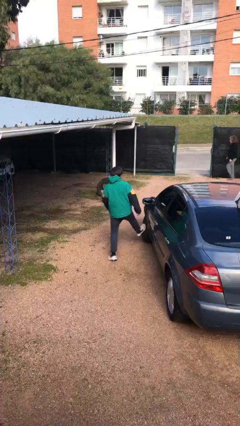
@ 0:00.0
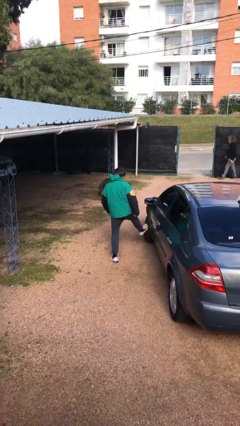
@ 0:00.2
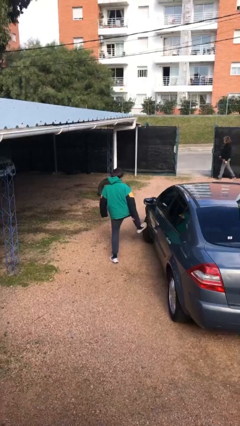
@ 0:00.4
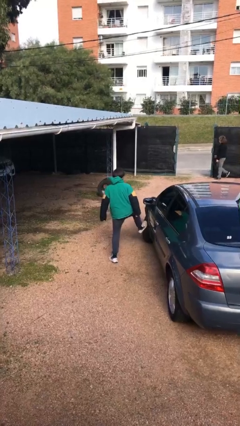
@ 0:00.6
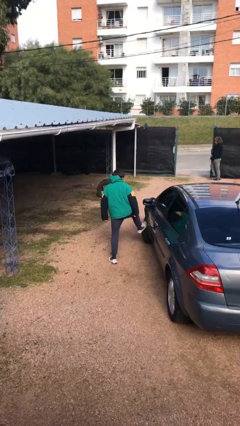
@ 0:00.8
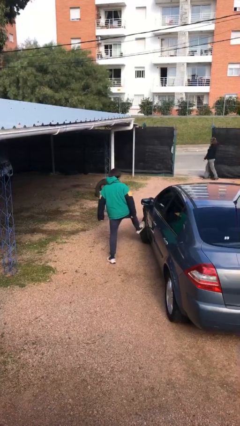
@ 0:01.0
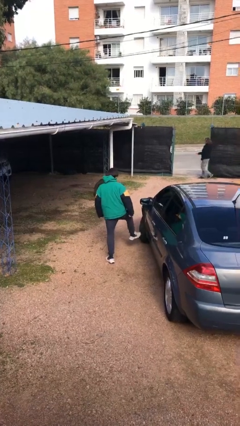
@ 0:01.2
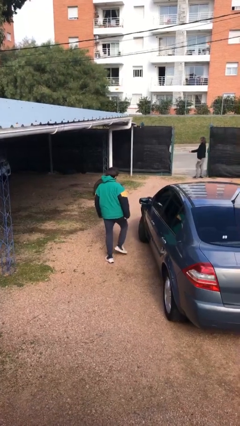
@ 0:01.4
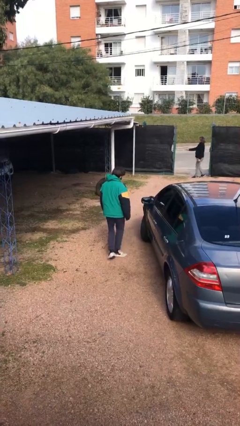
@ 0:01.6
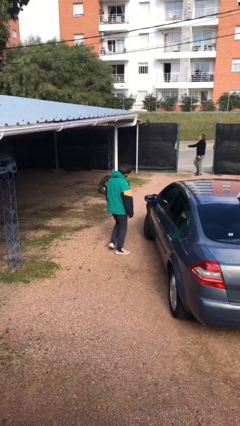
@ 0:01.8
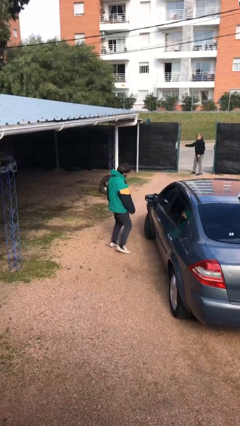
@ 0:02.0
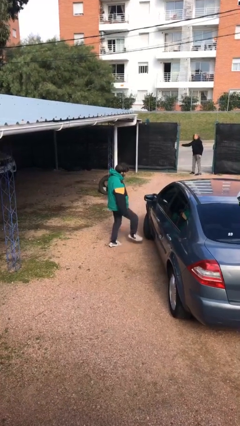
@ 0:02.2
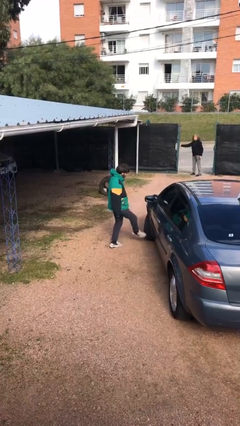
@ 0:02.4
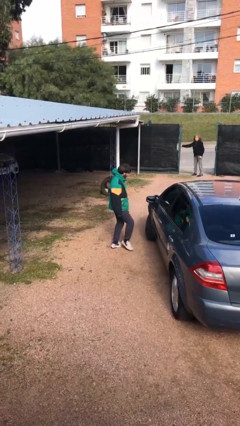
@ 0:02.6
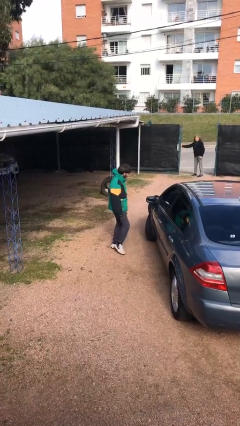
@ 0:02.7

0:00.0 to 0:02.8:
person kicks car tires

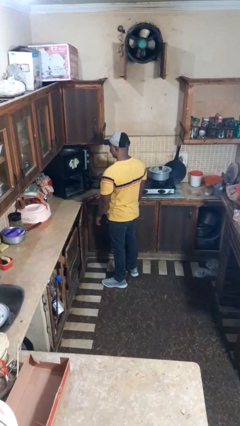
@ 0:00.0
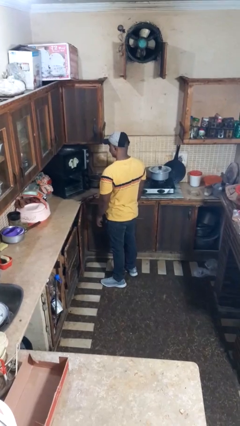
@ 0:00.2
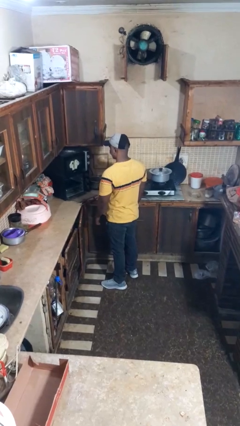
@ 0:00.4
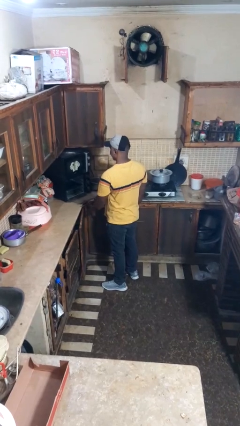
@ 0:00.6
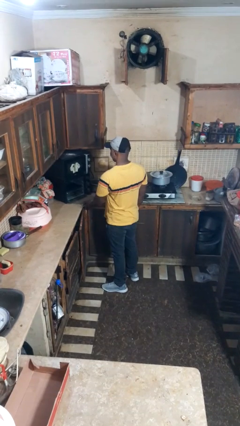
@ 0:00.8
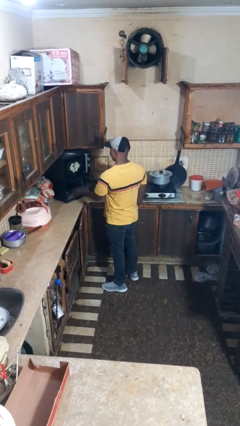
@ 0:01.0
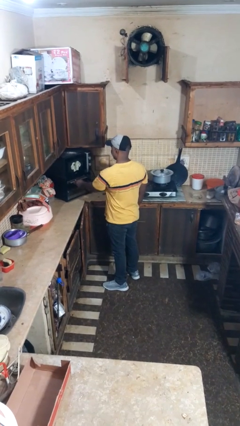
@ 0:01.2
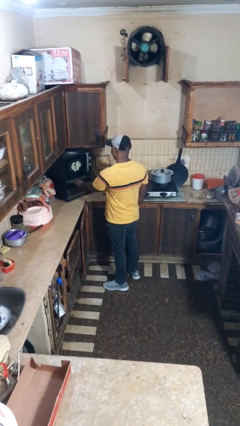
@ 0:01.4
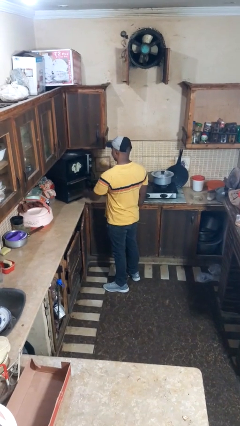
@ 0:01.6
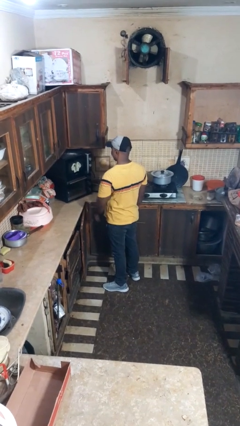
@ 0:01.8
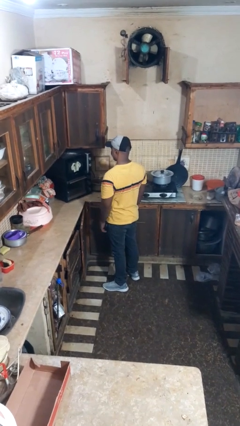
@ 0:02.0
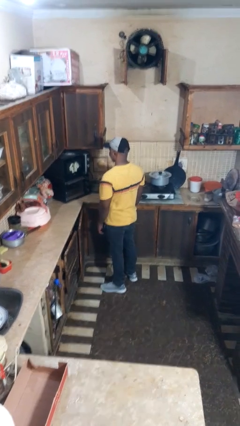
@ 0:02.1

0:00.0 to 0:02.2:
person closes oven door

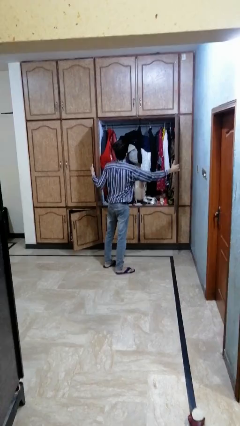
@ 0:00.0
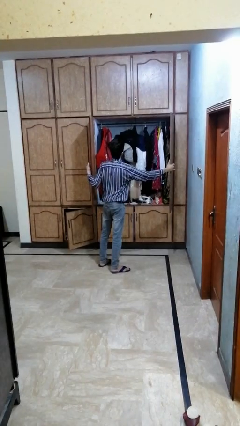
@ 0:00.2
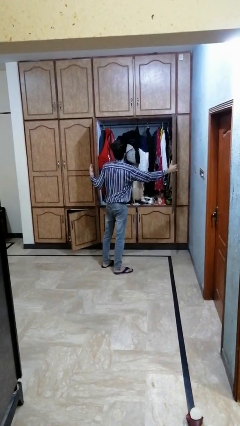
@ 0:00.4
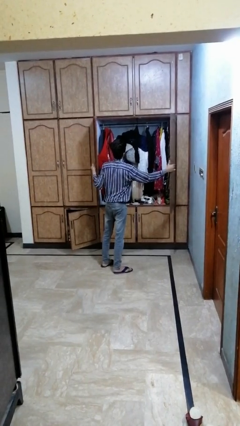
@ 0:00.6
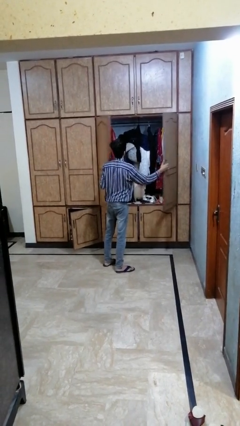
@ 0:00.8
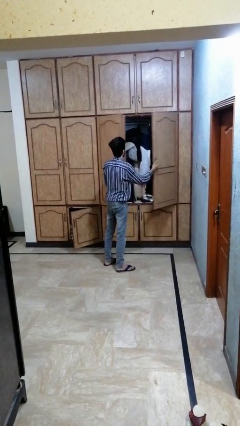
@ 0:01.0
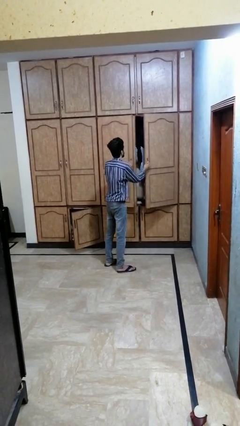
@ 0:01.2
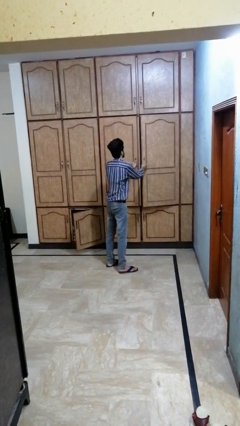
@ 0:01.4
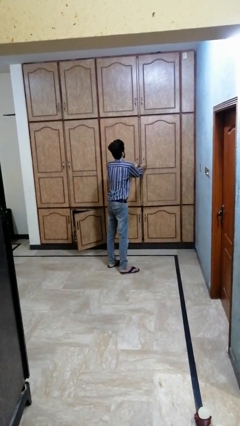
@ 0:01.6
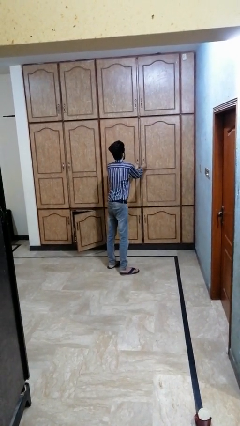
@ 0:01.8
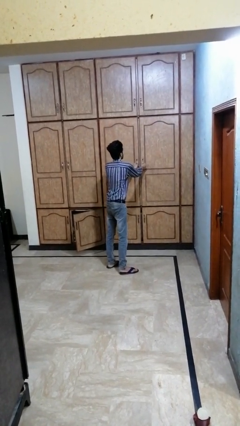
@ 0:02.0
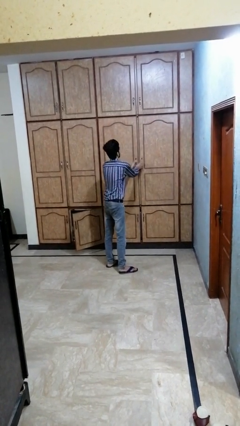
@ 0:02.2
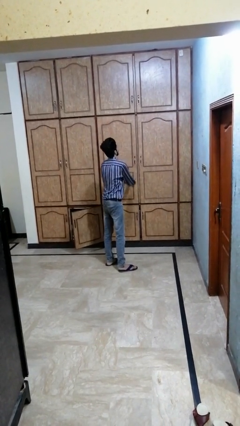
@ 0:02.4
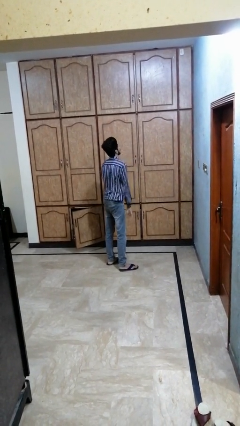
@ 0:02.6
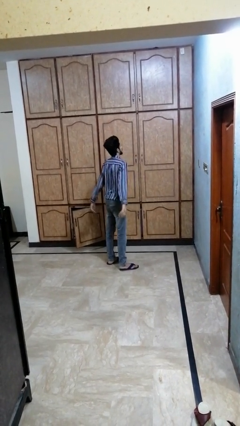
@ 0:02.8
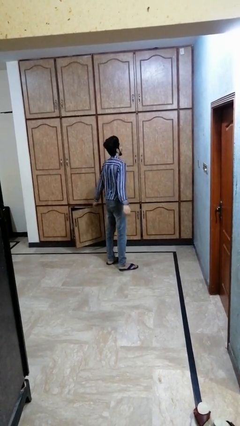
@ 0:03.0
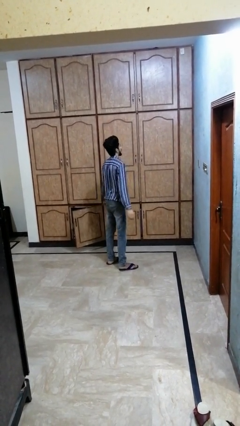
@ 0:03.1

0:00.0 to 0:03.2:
person closes dresser drawer

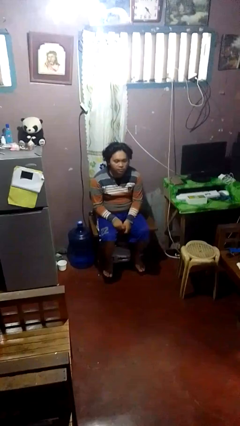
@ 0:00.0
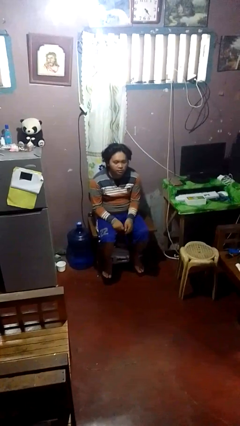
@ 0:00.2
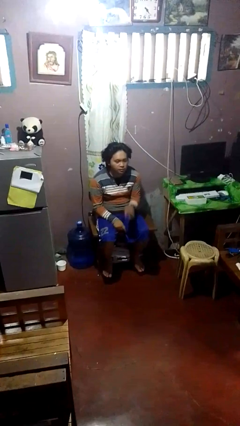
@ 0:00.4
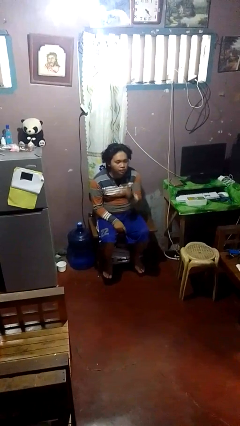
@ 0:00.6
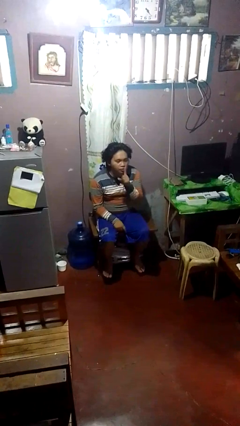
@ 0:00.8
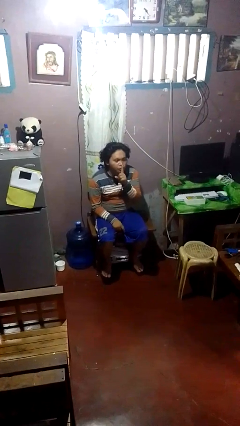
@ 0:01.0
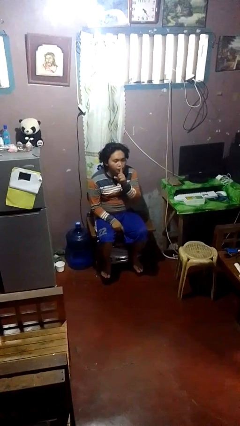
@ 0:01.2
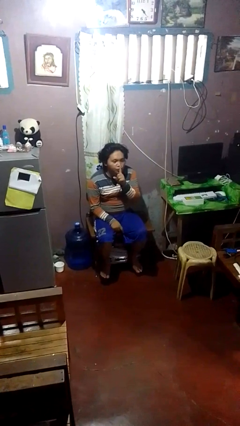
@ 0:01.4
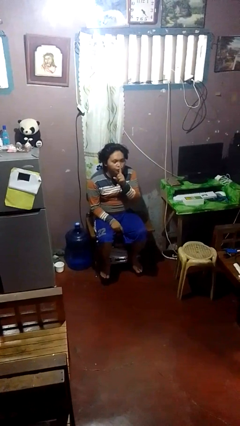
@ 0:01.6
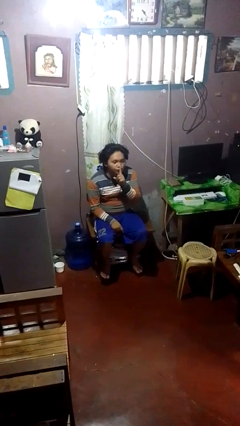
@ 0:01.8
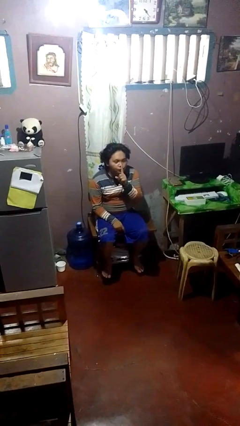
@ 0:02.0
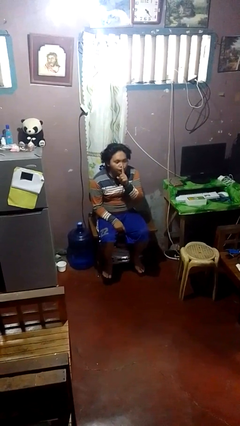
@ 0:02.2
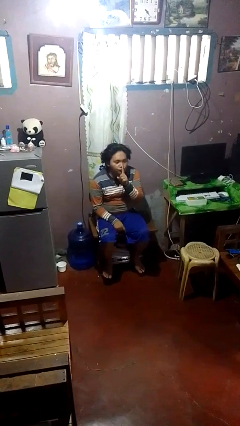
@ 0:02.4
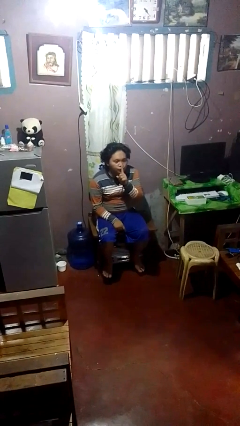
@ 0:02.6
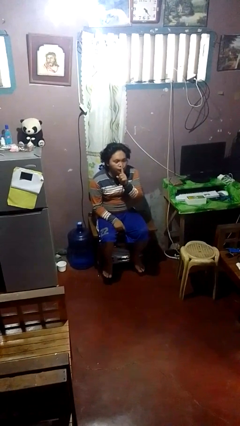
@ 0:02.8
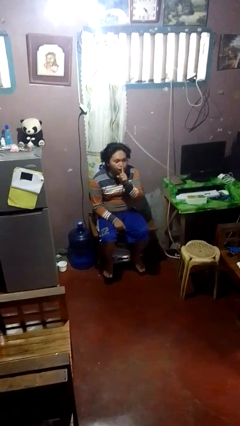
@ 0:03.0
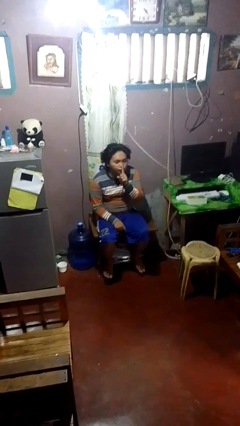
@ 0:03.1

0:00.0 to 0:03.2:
person gestures be quiet

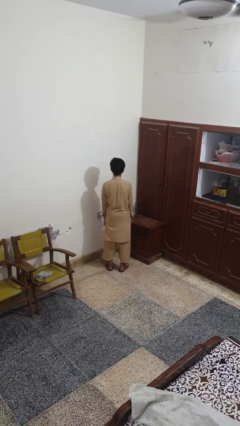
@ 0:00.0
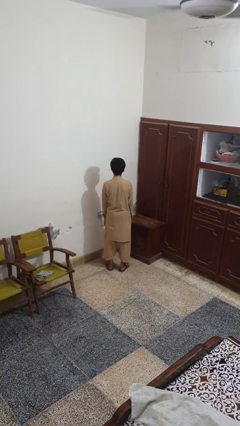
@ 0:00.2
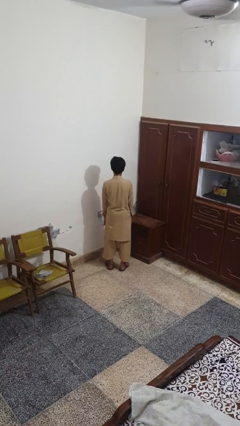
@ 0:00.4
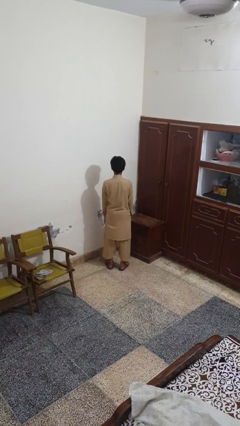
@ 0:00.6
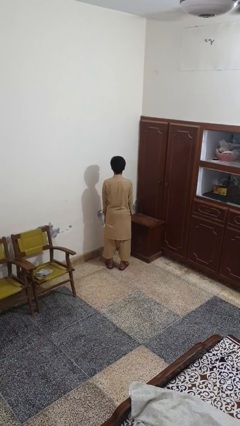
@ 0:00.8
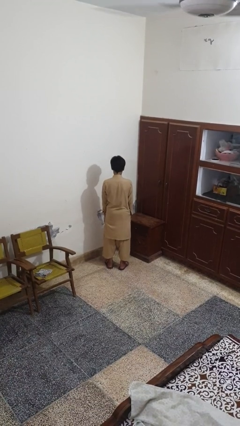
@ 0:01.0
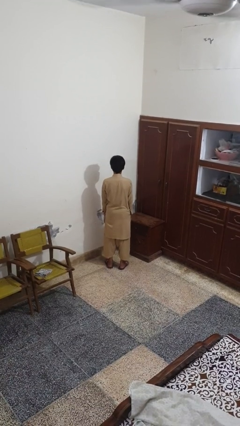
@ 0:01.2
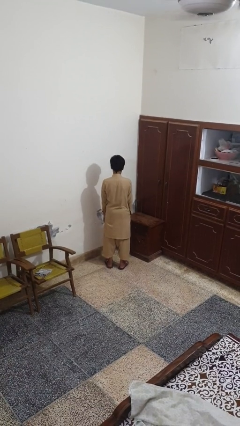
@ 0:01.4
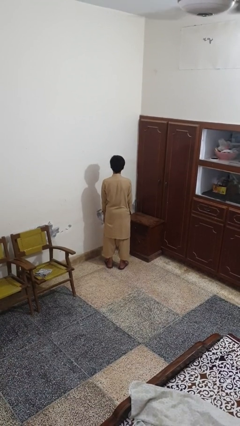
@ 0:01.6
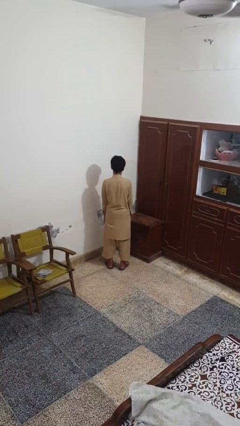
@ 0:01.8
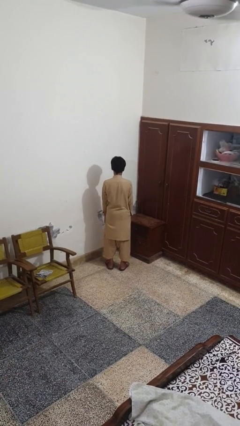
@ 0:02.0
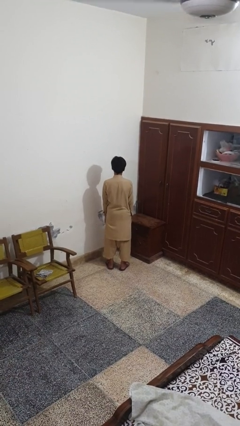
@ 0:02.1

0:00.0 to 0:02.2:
person nods head

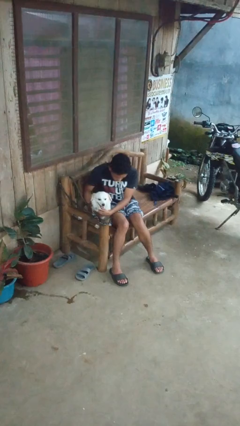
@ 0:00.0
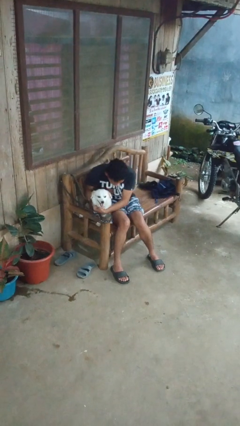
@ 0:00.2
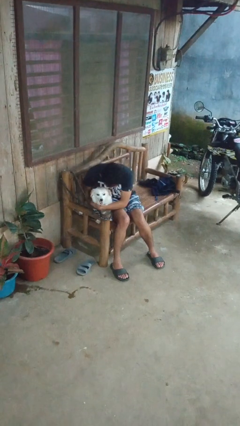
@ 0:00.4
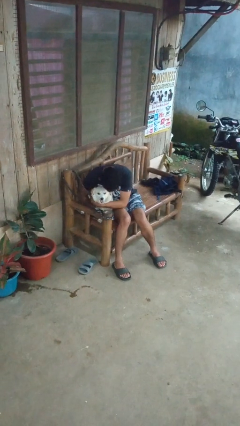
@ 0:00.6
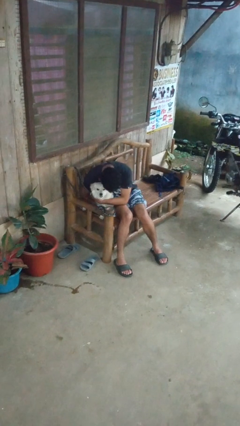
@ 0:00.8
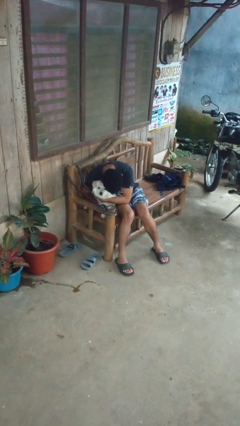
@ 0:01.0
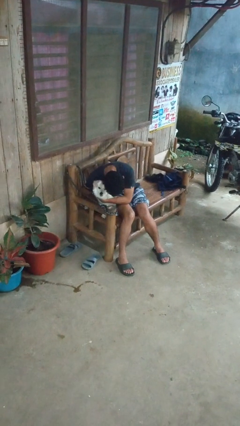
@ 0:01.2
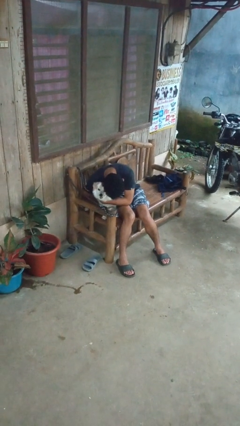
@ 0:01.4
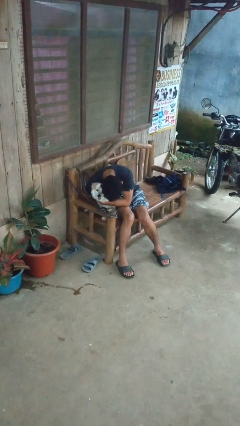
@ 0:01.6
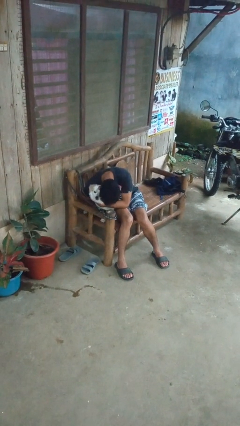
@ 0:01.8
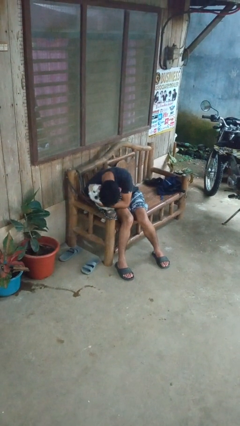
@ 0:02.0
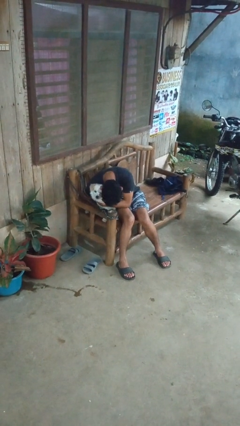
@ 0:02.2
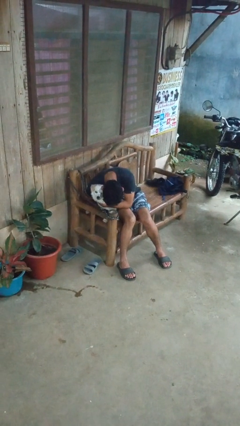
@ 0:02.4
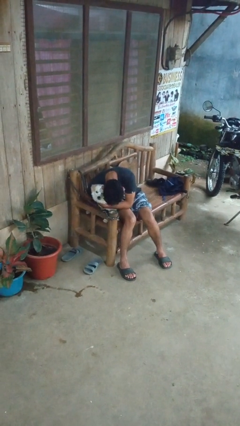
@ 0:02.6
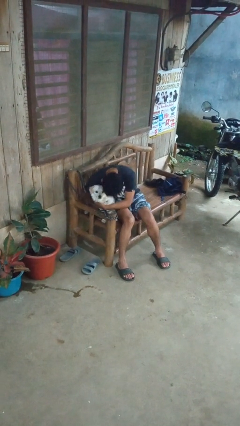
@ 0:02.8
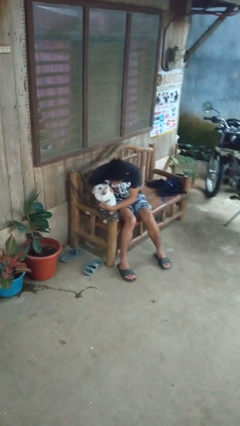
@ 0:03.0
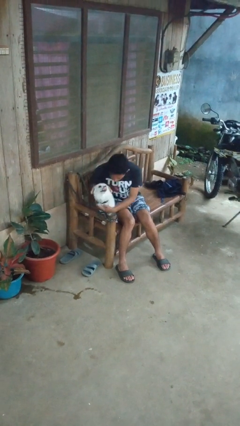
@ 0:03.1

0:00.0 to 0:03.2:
person hugs dog
